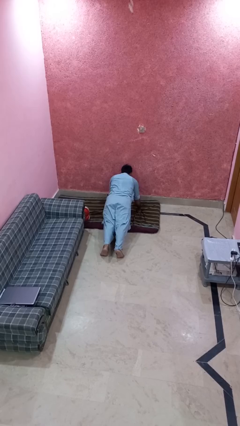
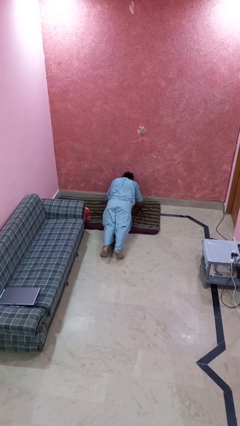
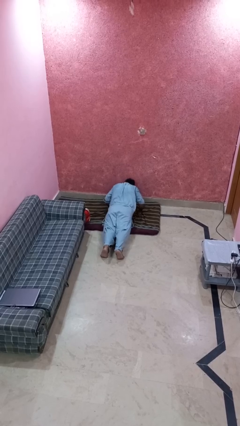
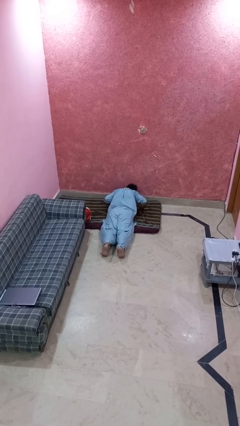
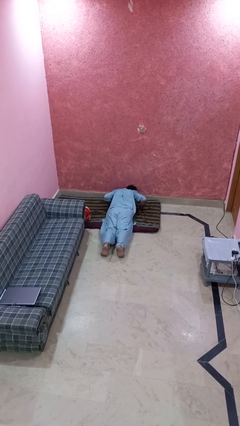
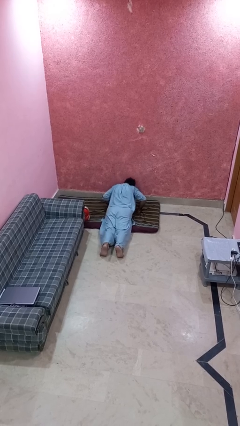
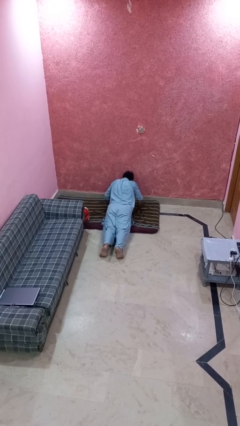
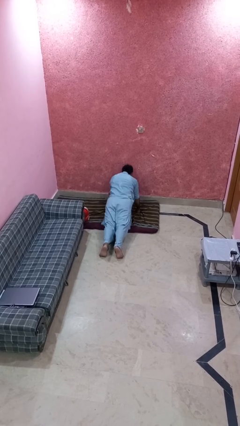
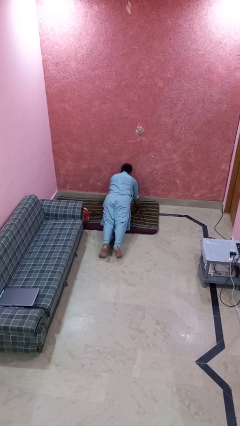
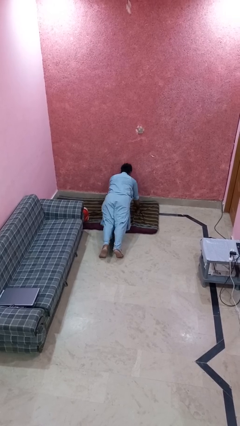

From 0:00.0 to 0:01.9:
person exercises with pushup

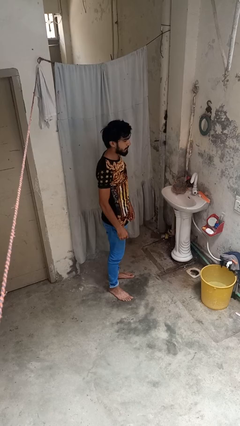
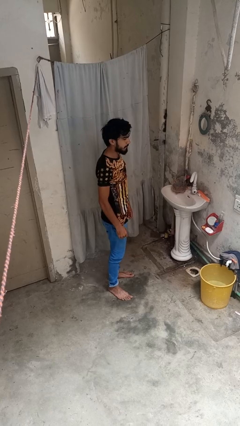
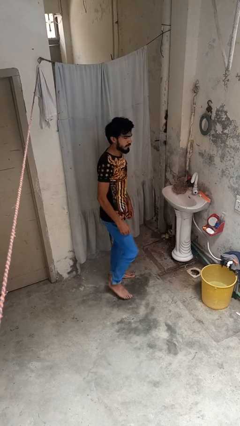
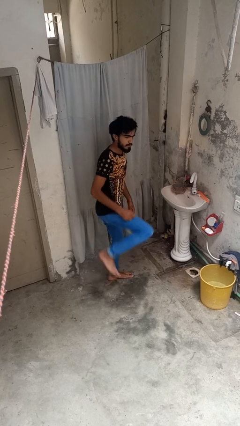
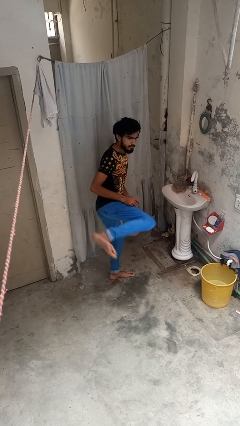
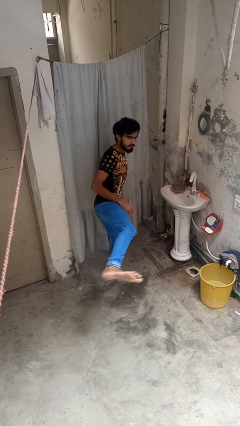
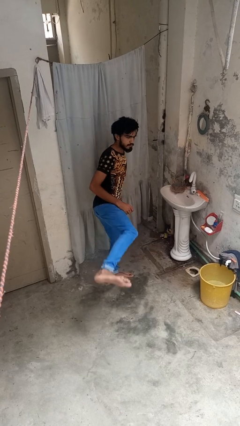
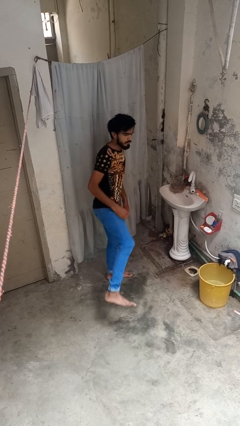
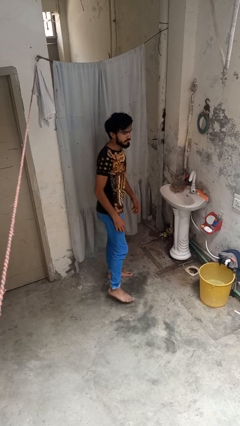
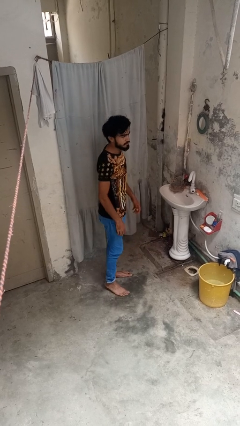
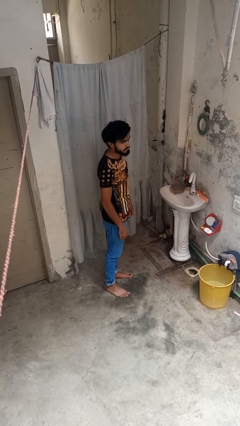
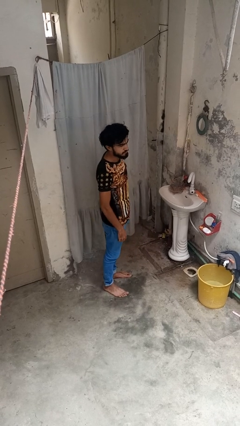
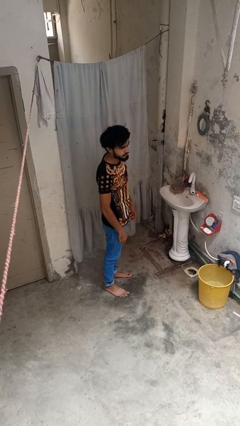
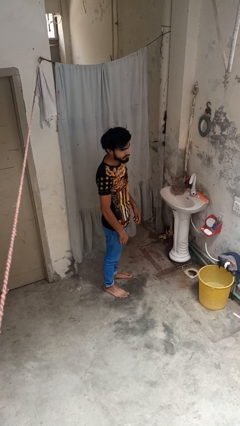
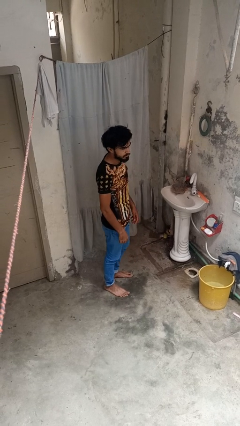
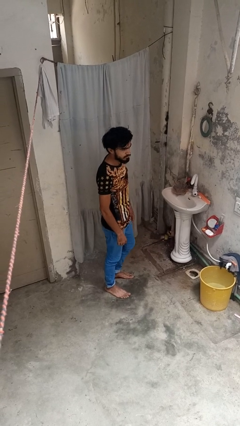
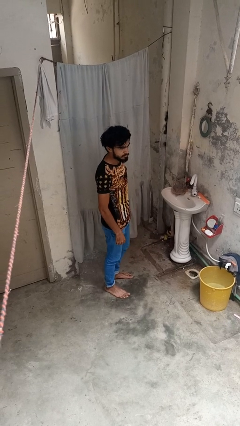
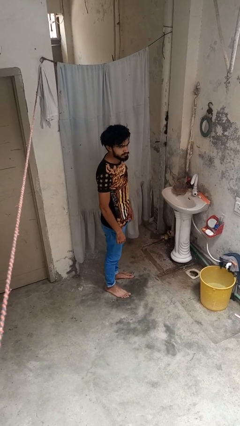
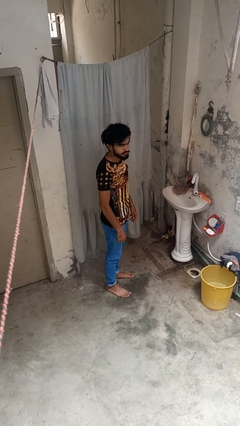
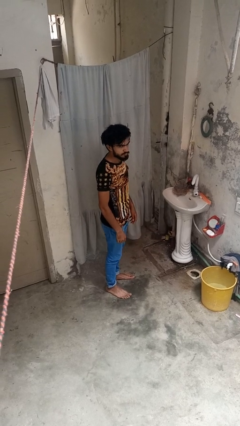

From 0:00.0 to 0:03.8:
person karate kicks

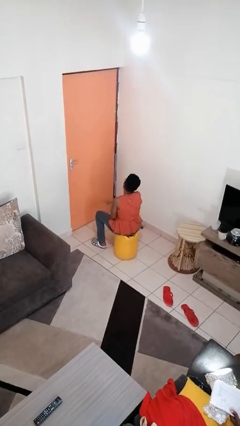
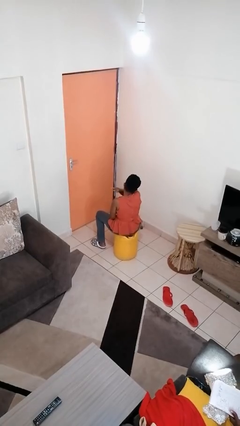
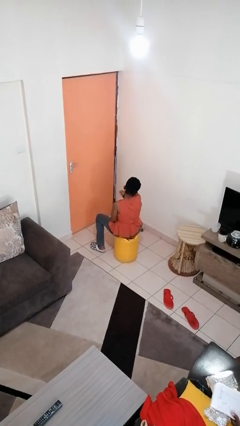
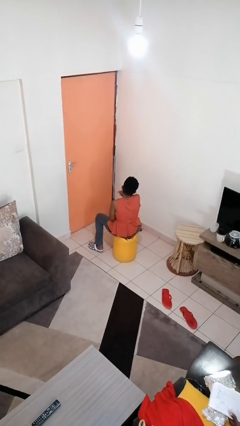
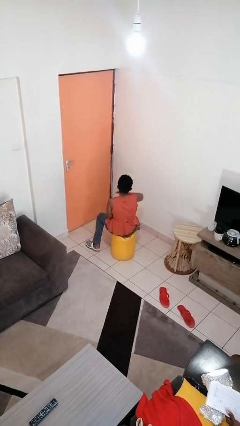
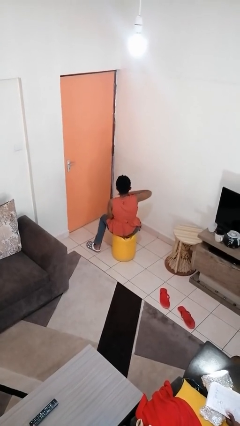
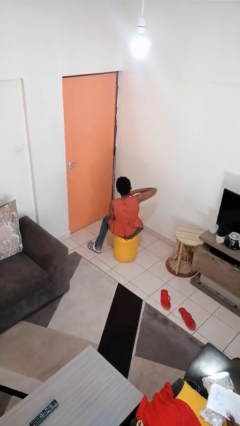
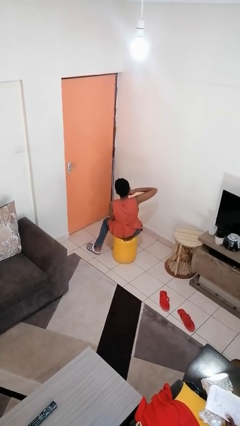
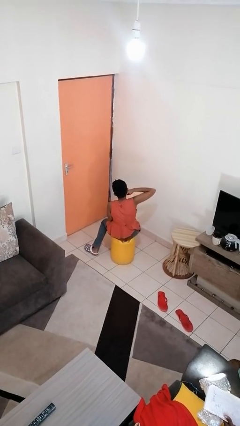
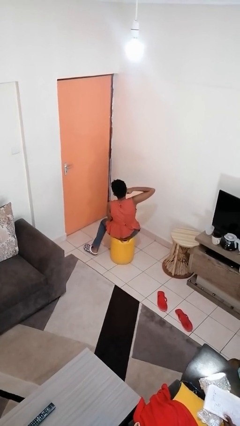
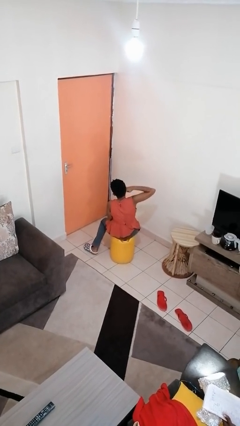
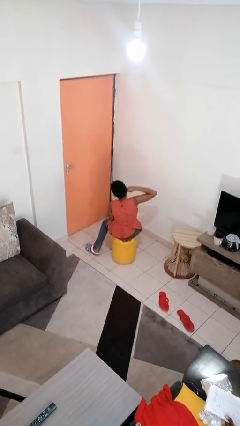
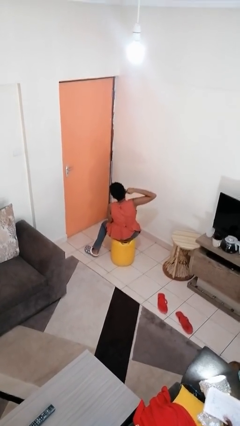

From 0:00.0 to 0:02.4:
person gestures cut

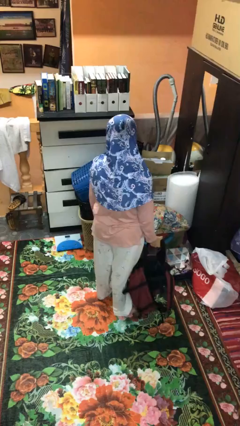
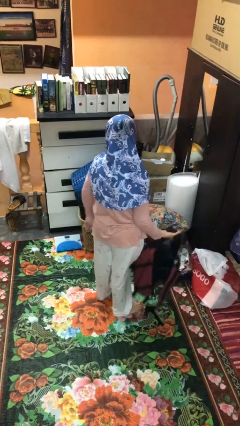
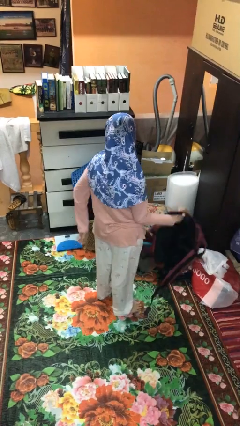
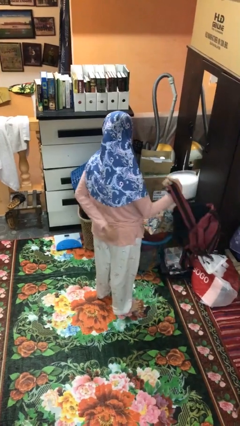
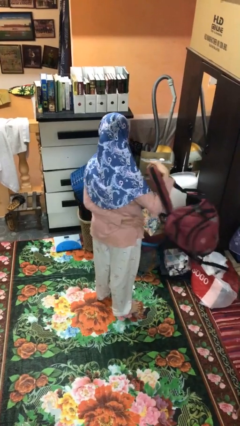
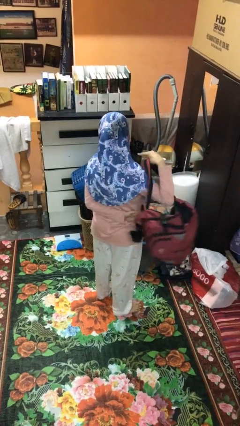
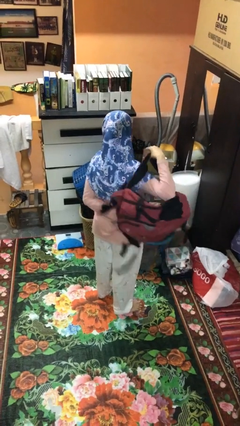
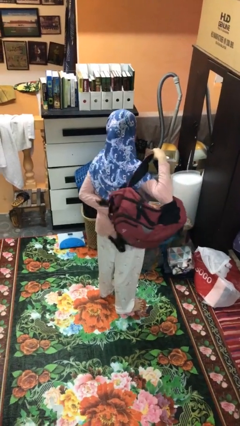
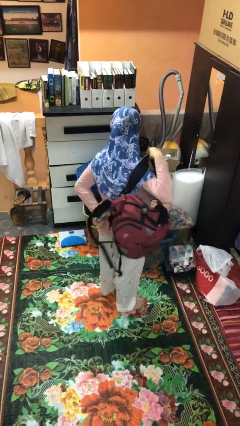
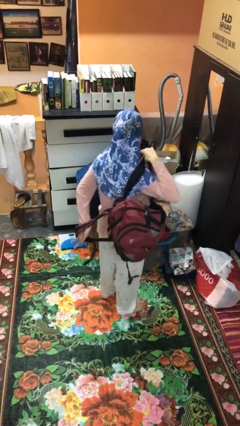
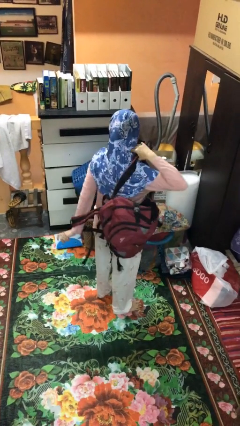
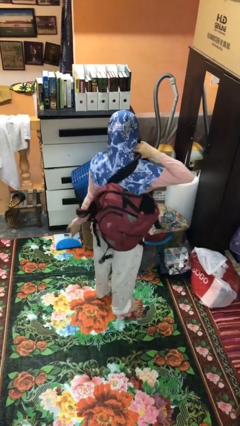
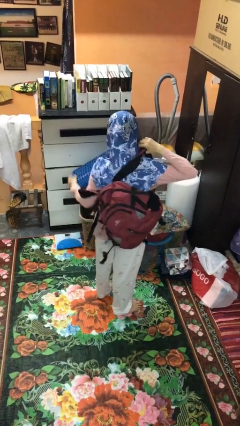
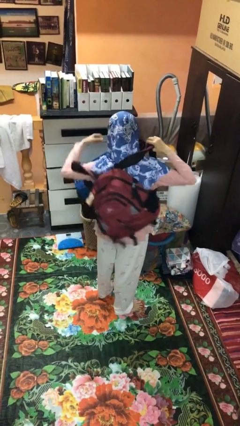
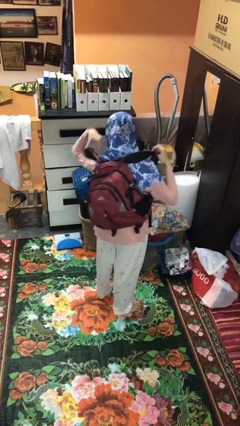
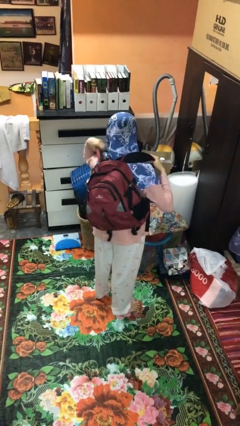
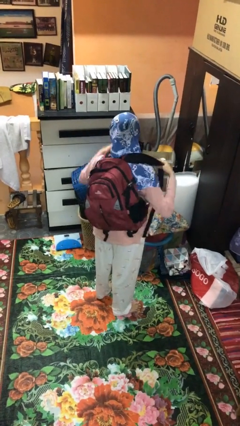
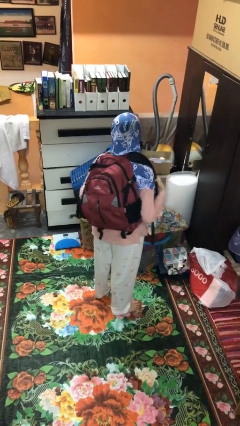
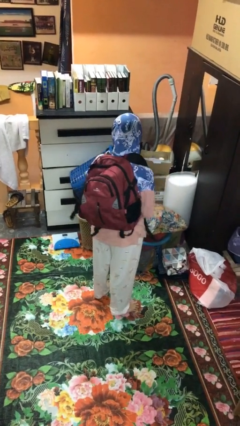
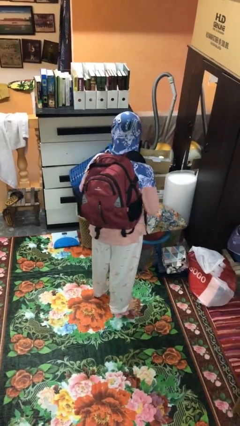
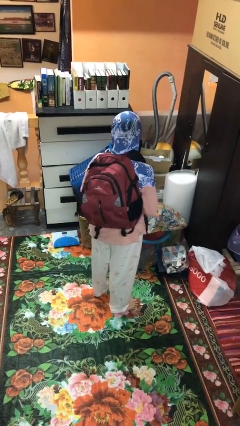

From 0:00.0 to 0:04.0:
person puts on backpack

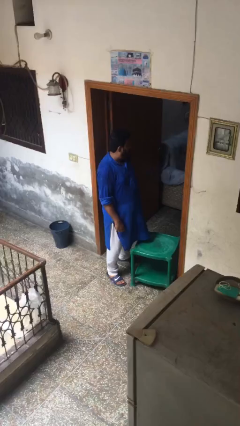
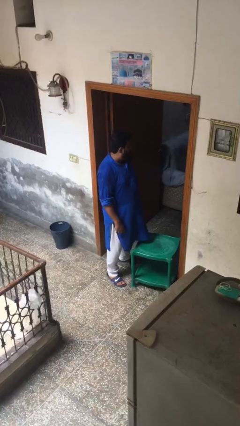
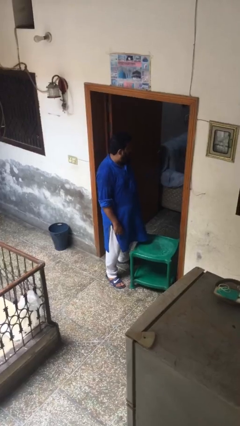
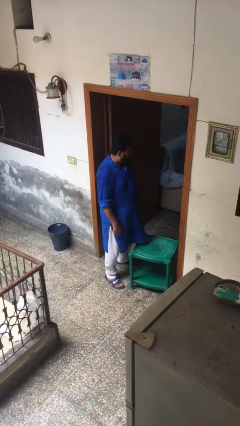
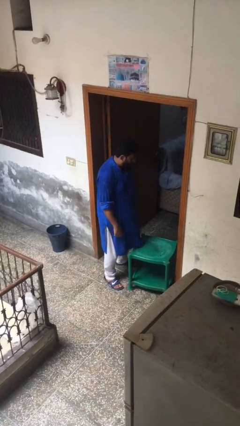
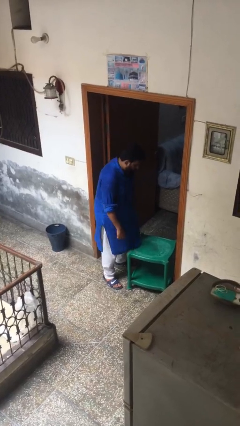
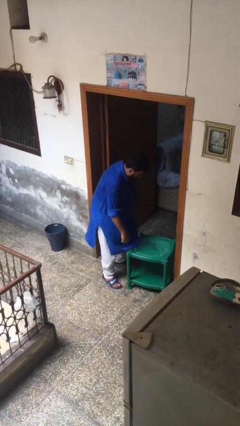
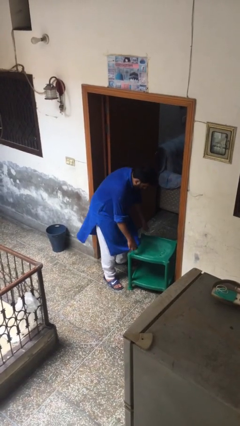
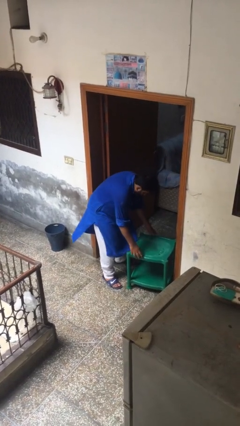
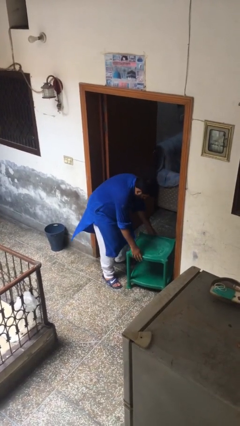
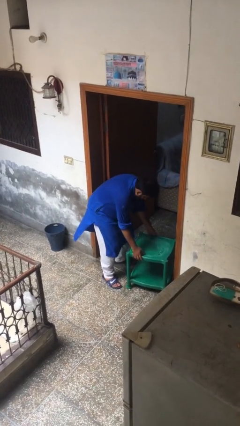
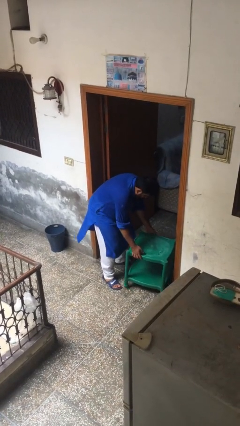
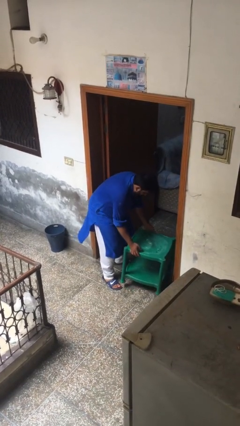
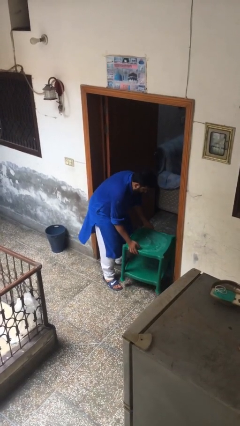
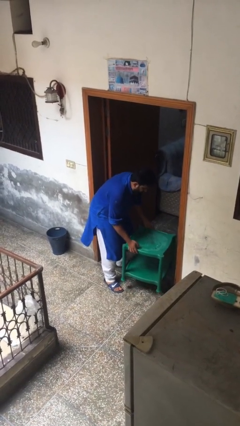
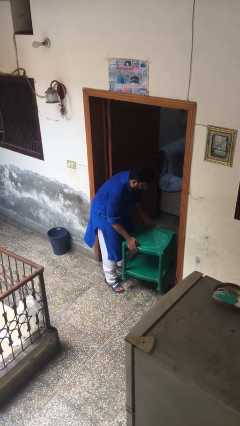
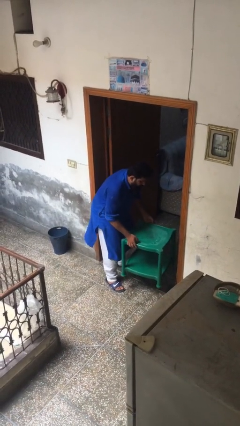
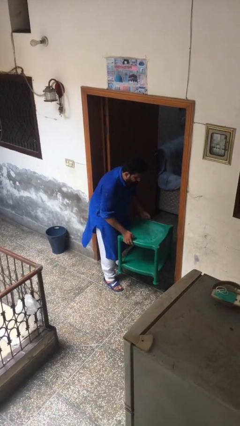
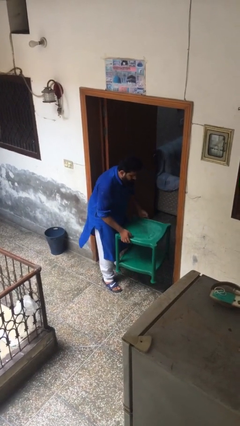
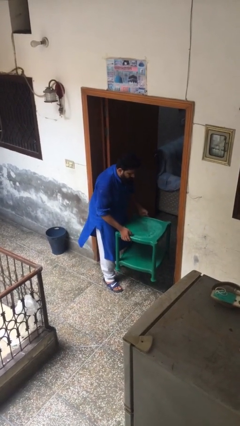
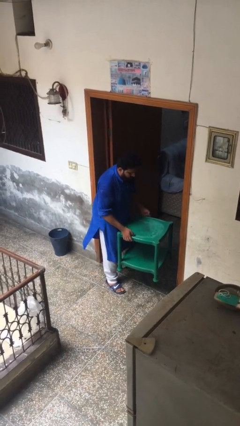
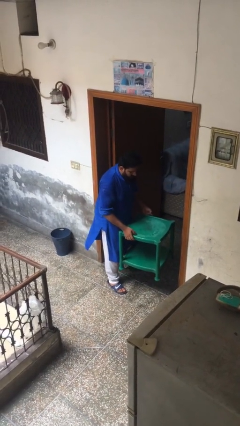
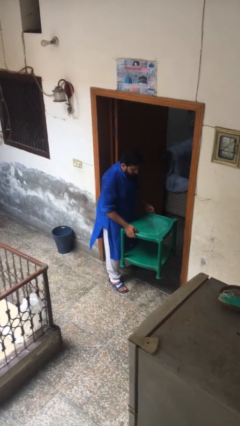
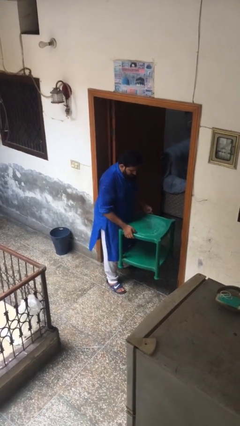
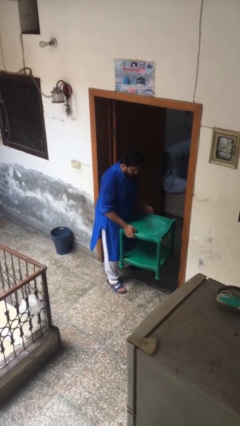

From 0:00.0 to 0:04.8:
person picks up object from floor

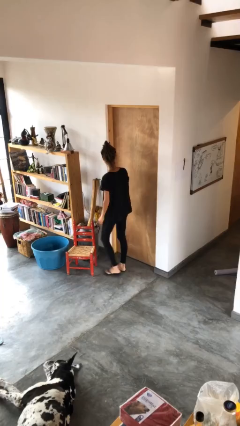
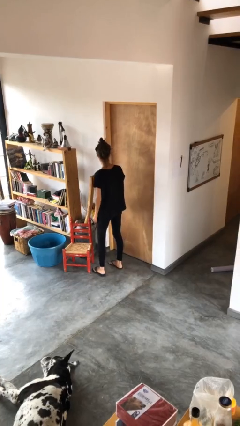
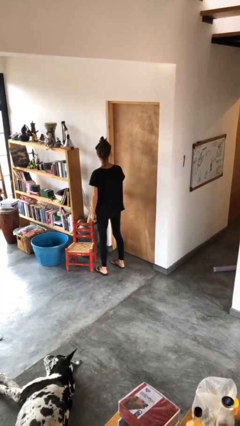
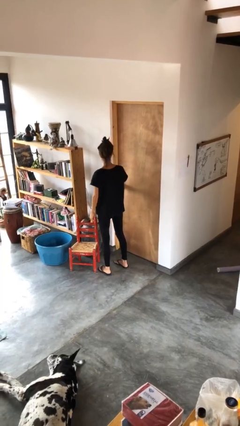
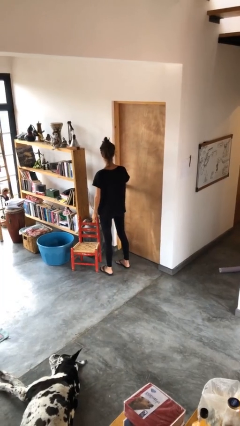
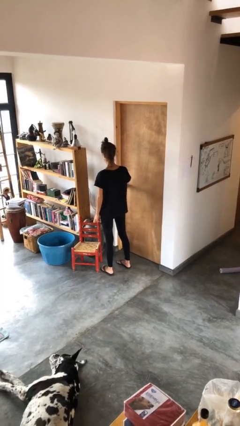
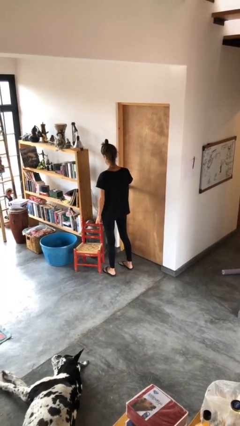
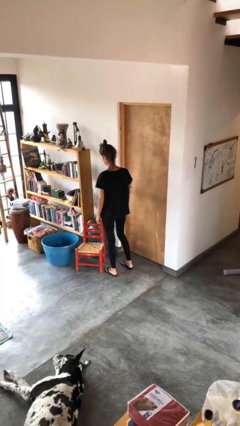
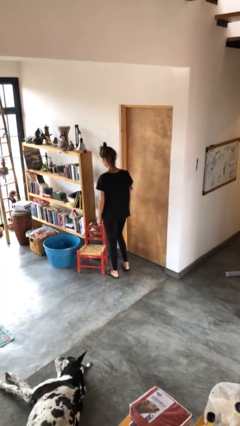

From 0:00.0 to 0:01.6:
person locks door with keys
